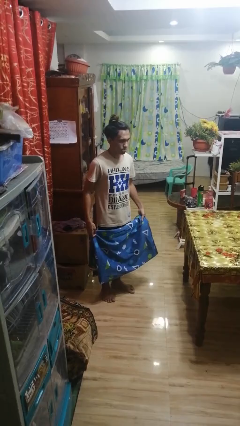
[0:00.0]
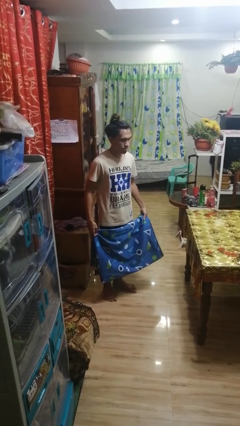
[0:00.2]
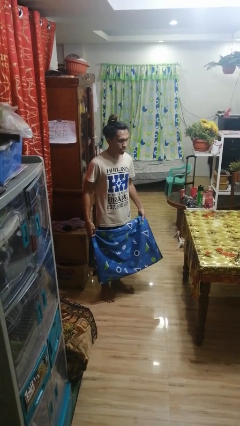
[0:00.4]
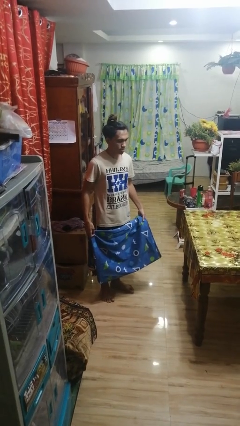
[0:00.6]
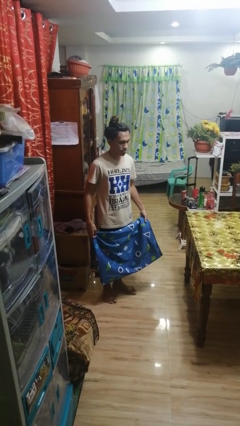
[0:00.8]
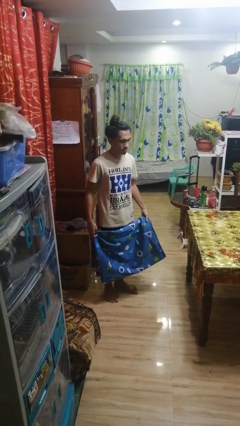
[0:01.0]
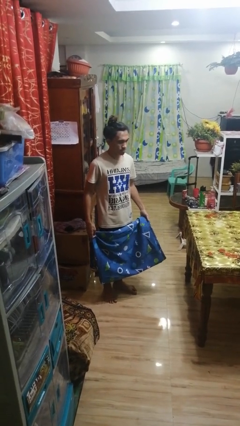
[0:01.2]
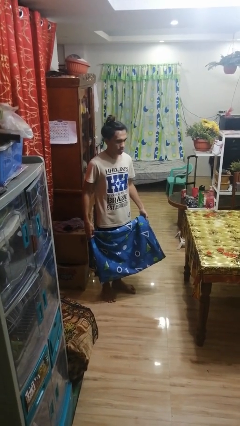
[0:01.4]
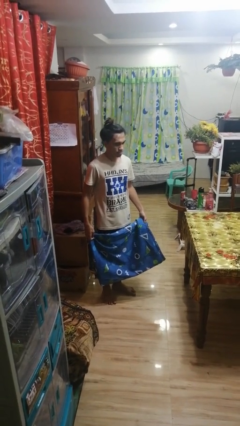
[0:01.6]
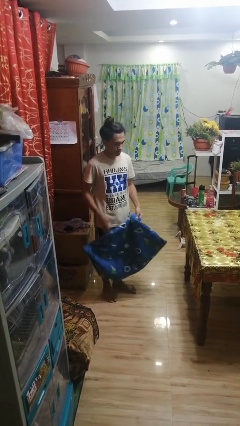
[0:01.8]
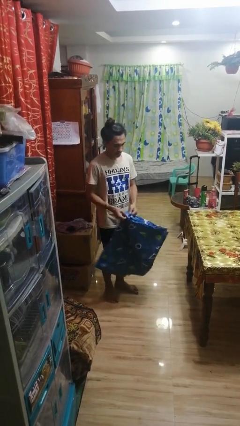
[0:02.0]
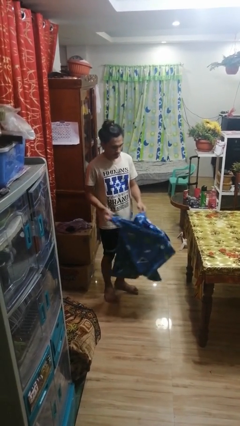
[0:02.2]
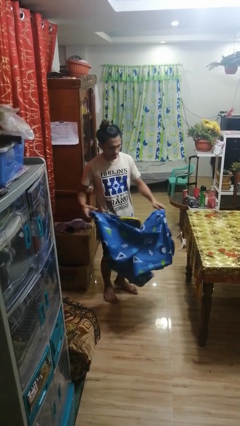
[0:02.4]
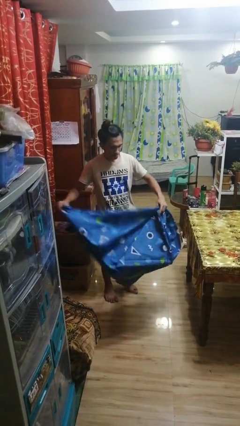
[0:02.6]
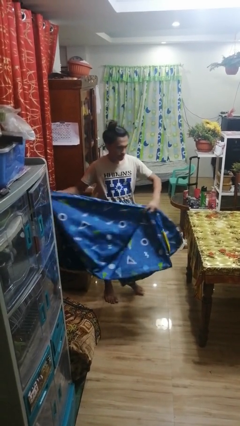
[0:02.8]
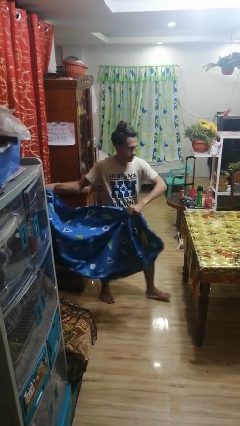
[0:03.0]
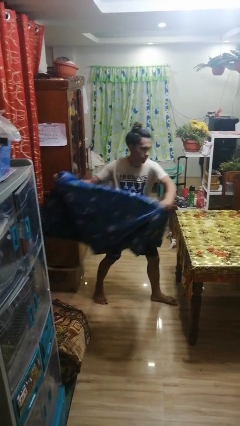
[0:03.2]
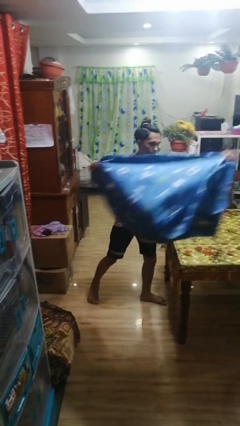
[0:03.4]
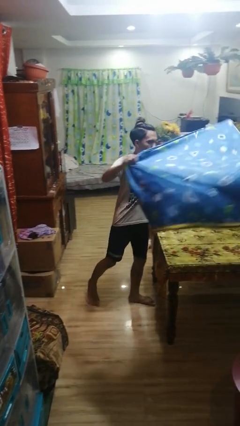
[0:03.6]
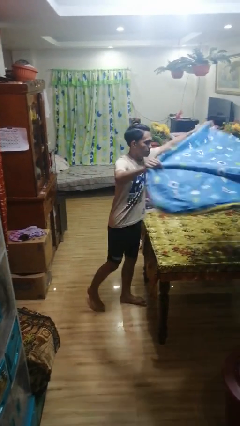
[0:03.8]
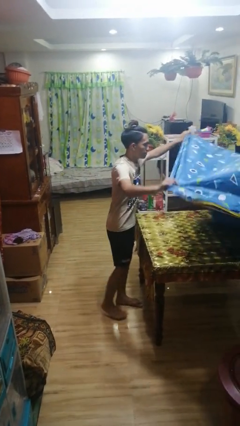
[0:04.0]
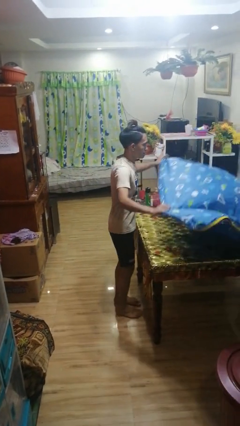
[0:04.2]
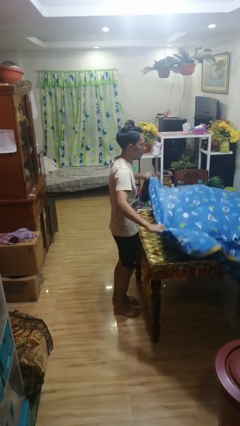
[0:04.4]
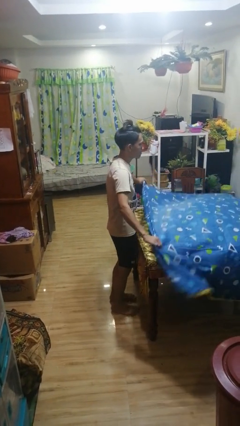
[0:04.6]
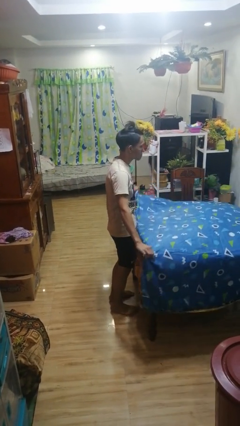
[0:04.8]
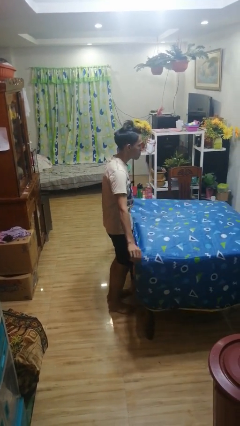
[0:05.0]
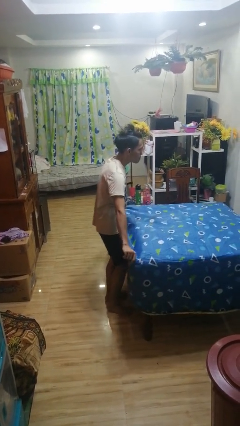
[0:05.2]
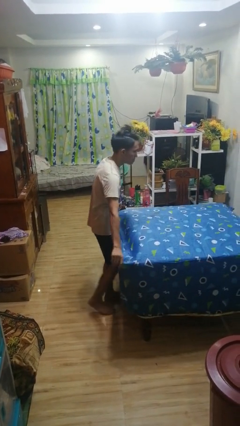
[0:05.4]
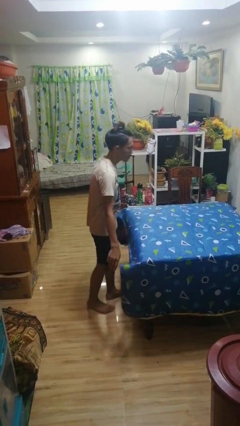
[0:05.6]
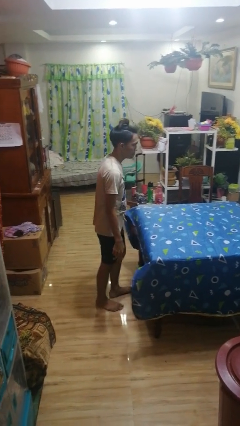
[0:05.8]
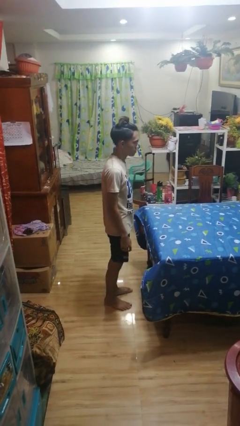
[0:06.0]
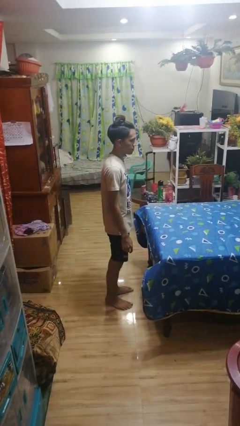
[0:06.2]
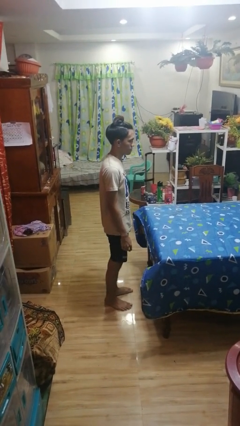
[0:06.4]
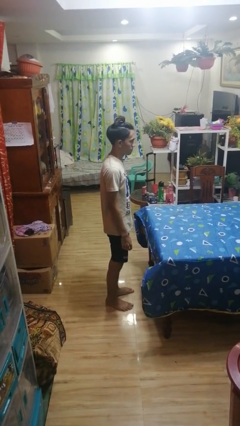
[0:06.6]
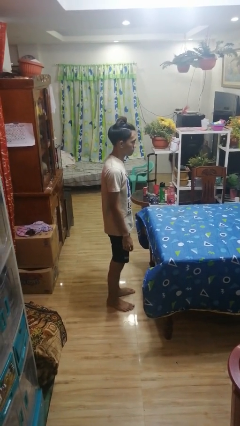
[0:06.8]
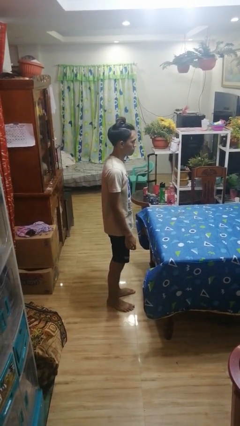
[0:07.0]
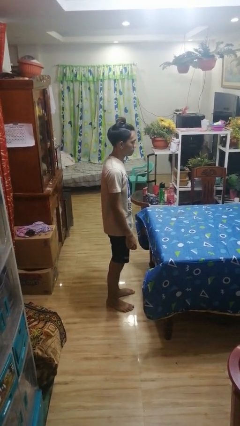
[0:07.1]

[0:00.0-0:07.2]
person spreads tablecloth

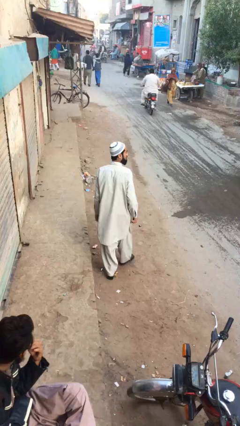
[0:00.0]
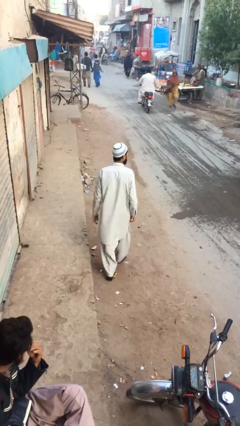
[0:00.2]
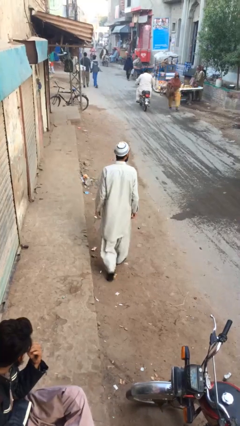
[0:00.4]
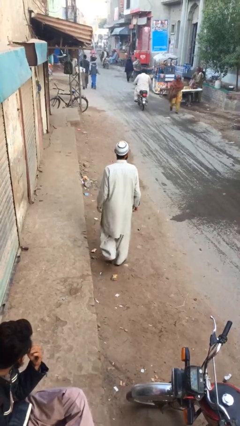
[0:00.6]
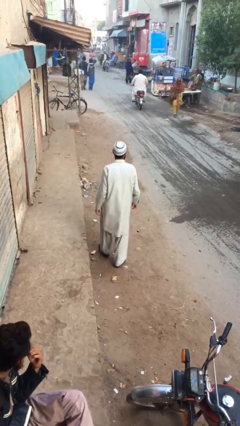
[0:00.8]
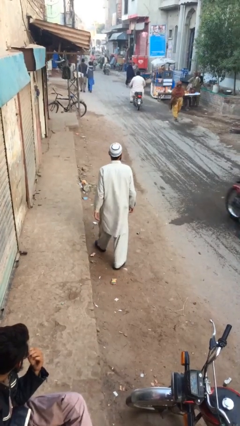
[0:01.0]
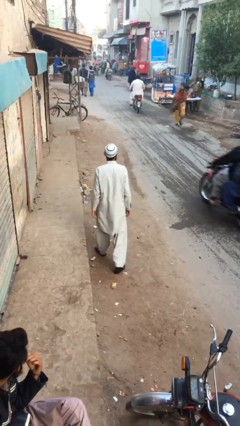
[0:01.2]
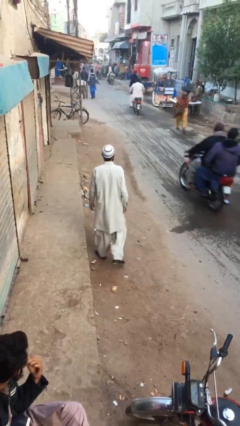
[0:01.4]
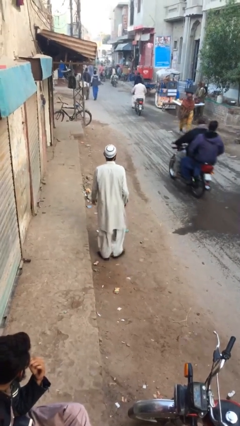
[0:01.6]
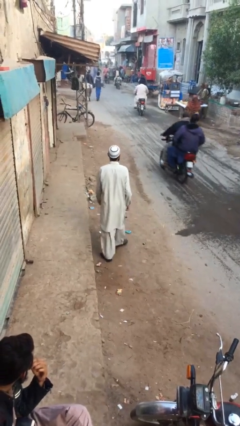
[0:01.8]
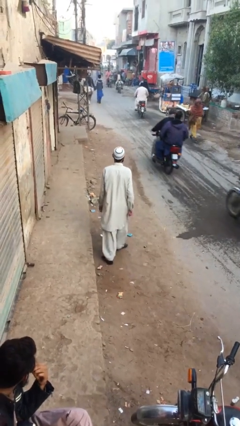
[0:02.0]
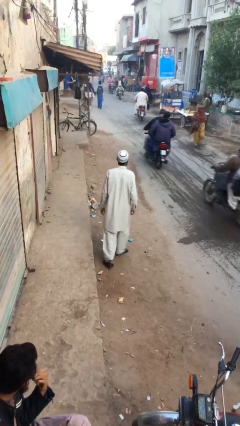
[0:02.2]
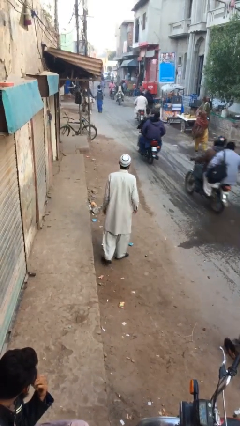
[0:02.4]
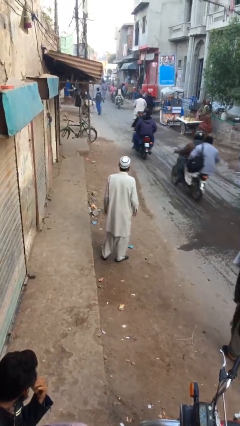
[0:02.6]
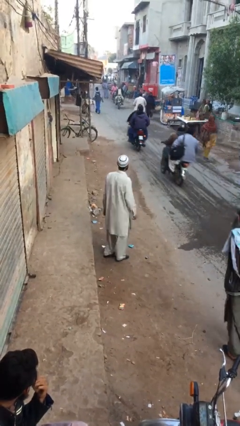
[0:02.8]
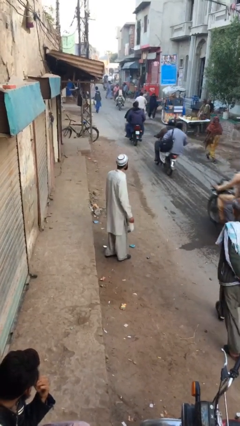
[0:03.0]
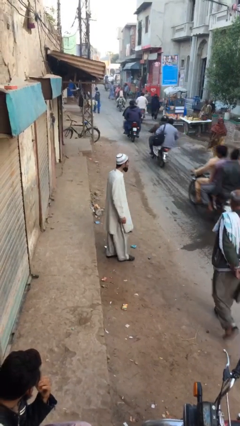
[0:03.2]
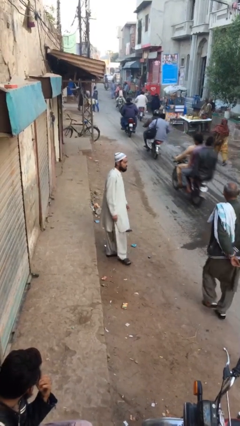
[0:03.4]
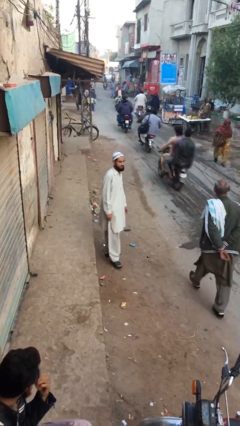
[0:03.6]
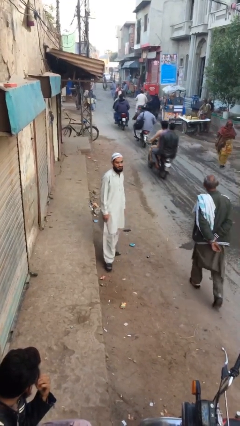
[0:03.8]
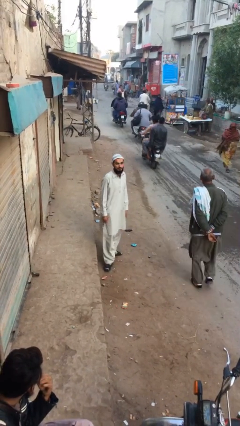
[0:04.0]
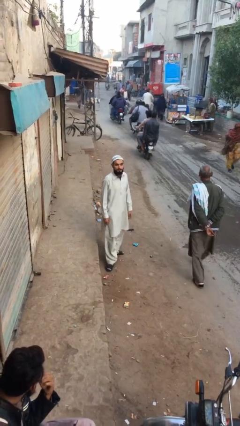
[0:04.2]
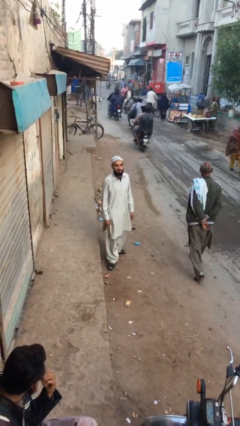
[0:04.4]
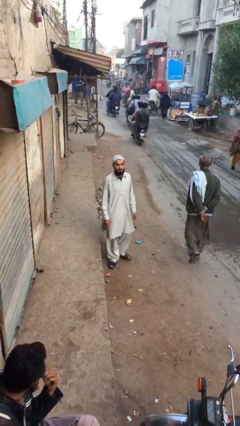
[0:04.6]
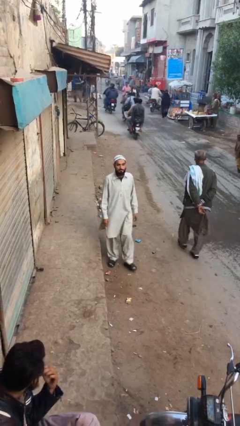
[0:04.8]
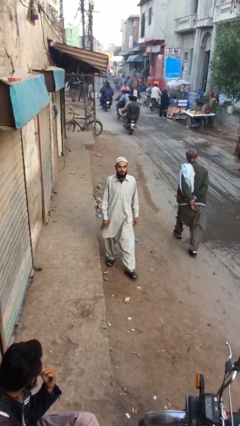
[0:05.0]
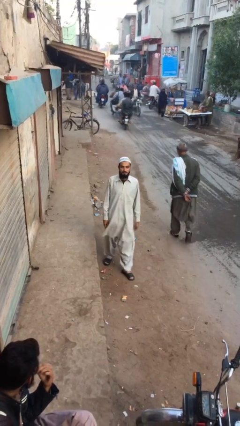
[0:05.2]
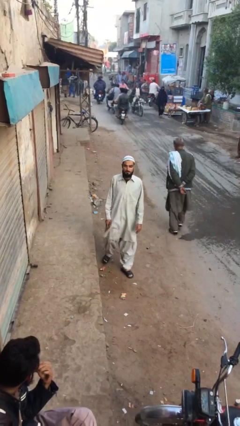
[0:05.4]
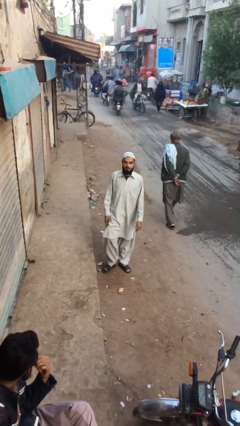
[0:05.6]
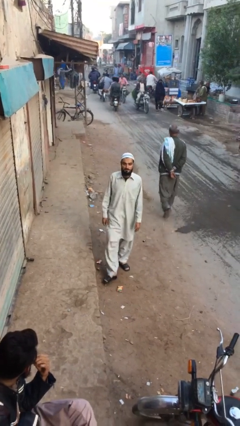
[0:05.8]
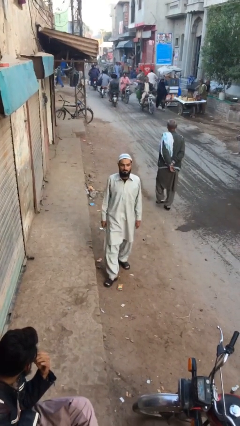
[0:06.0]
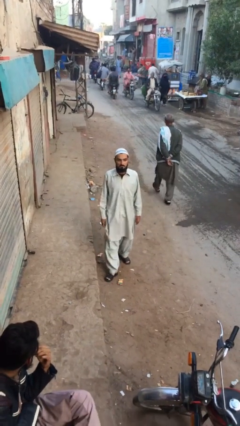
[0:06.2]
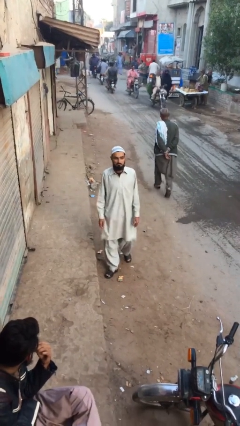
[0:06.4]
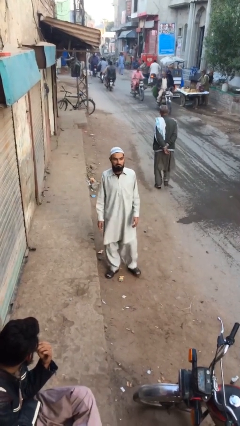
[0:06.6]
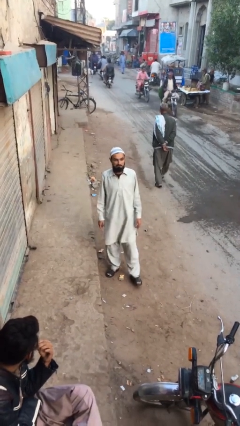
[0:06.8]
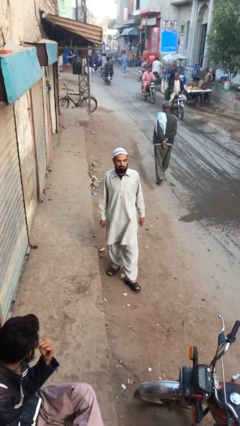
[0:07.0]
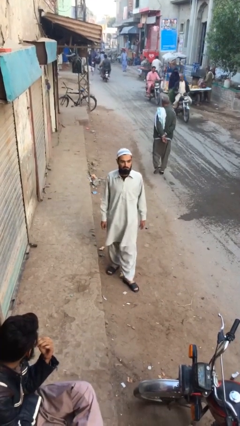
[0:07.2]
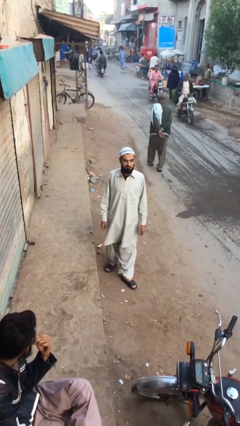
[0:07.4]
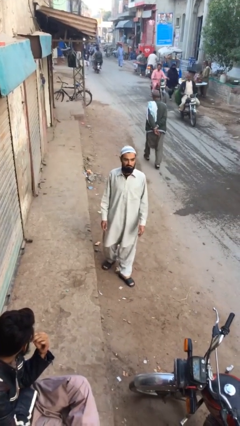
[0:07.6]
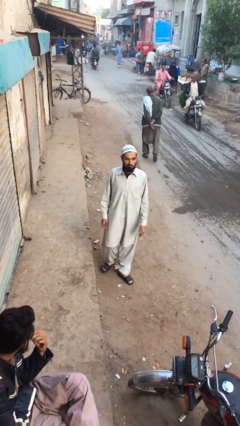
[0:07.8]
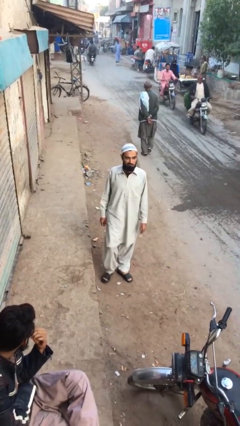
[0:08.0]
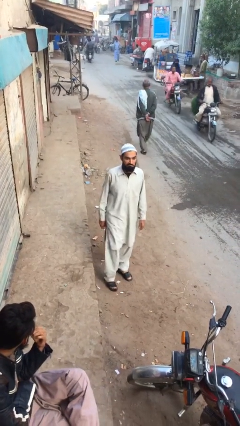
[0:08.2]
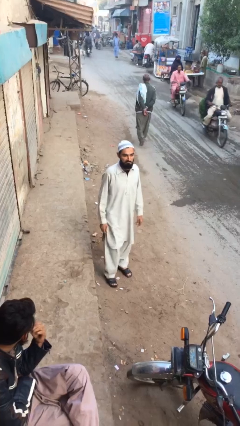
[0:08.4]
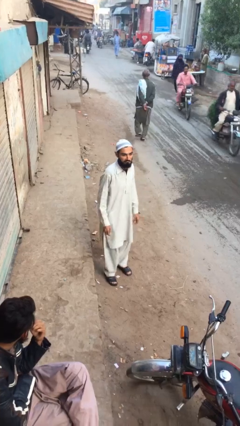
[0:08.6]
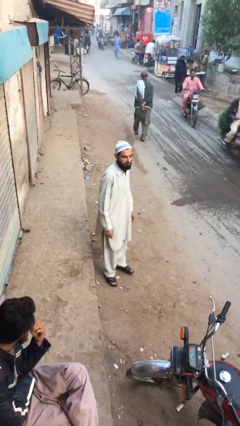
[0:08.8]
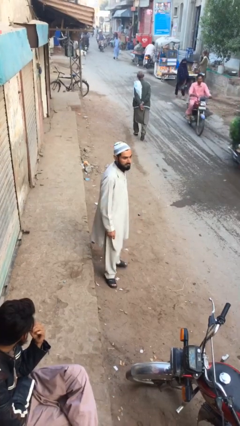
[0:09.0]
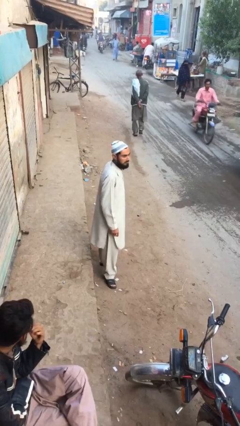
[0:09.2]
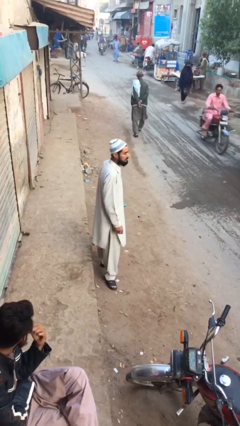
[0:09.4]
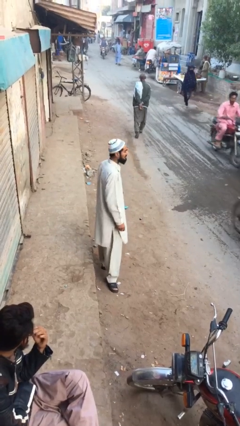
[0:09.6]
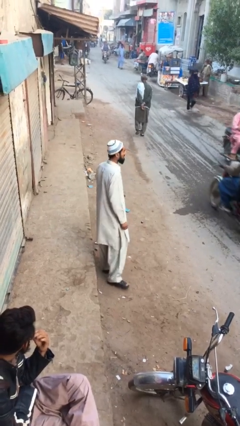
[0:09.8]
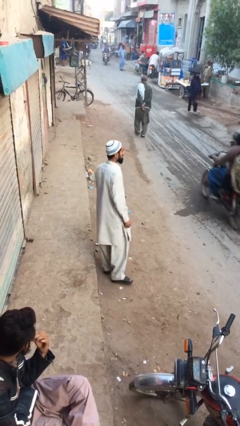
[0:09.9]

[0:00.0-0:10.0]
person walks

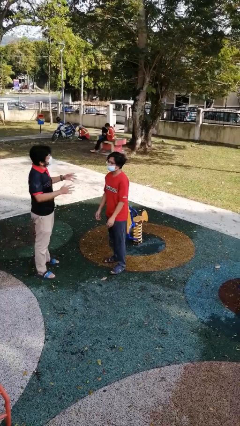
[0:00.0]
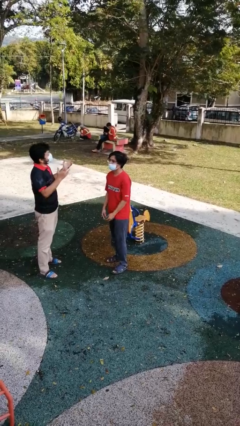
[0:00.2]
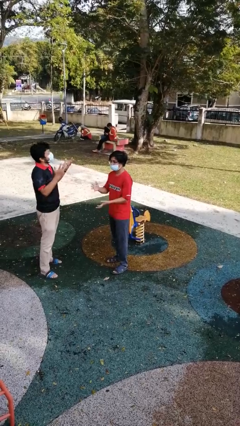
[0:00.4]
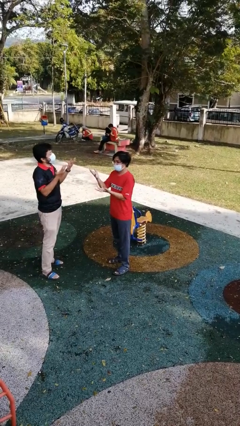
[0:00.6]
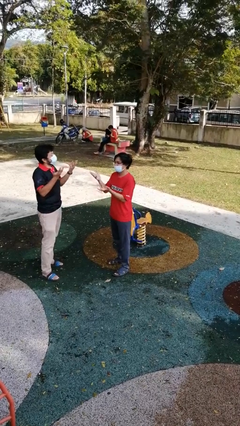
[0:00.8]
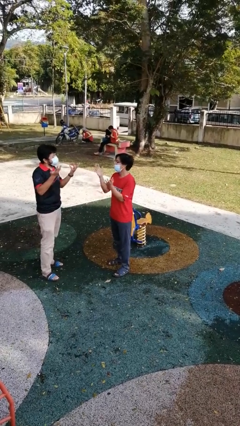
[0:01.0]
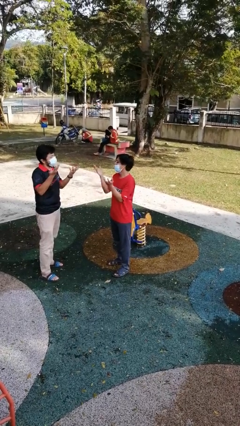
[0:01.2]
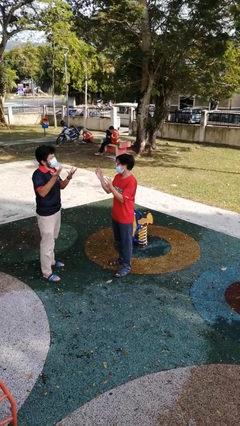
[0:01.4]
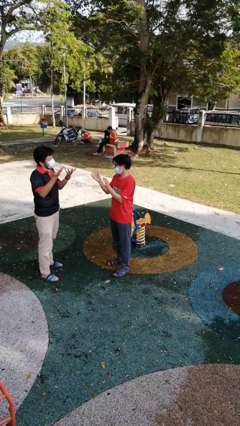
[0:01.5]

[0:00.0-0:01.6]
person talks to person
